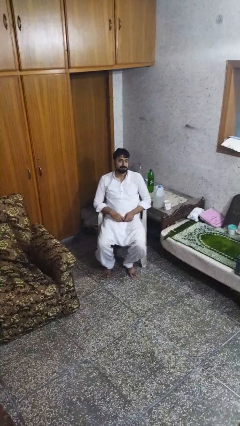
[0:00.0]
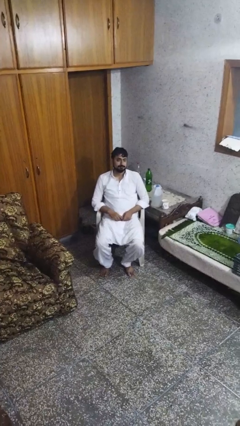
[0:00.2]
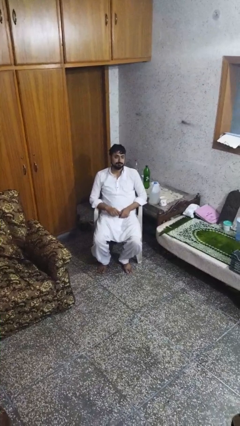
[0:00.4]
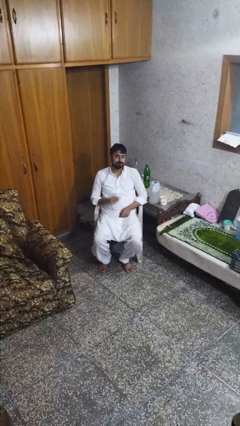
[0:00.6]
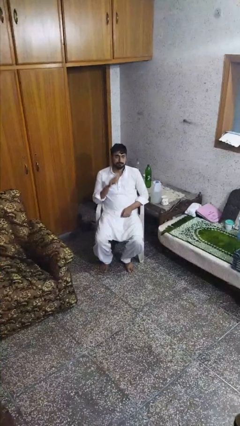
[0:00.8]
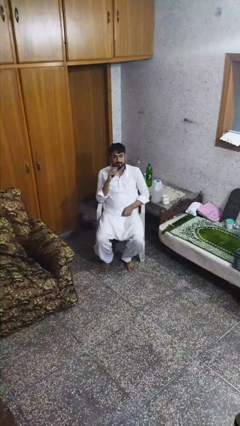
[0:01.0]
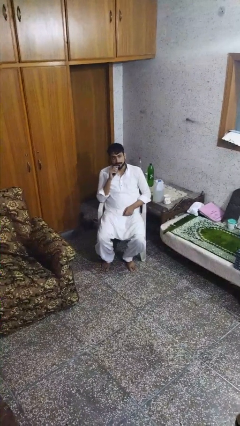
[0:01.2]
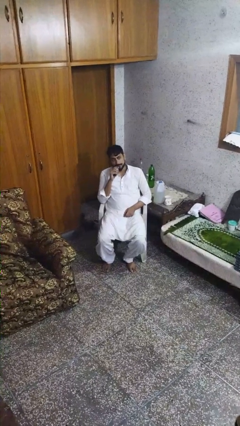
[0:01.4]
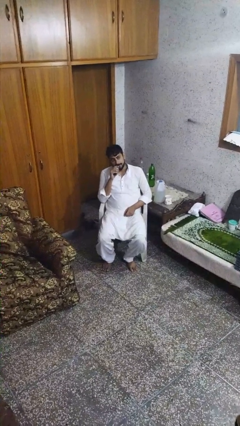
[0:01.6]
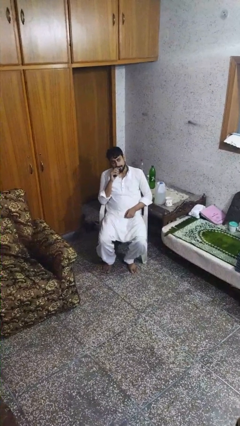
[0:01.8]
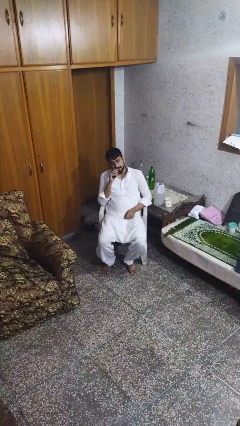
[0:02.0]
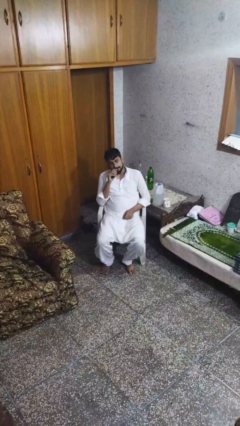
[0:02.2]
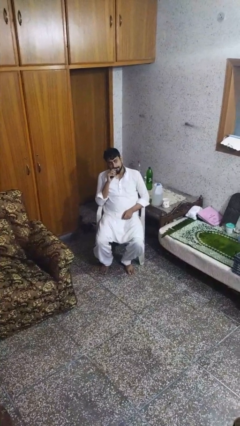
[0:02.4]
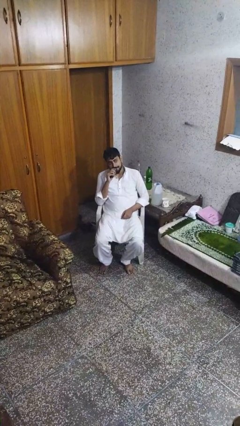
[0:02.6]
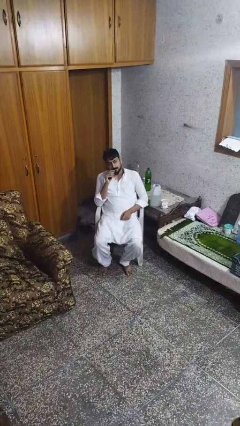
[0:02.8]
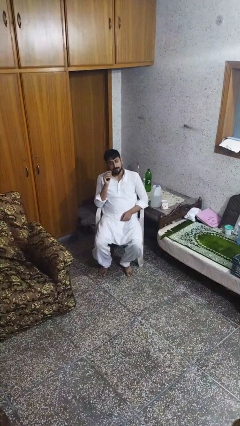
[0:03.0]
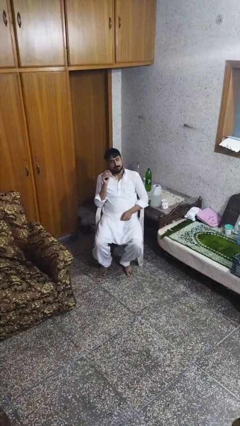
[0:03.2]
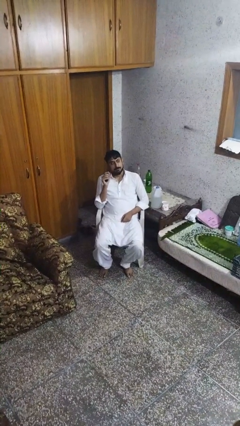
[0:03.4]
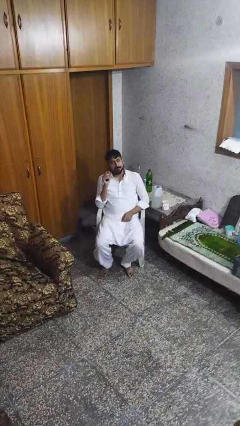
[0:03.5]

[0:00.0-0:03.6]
person vapes

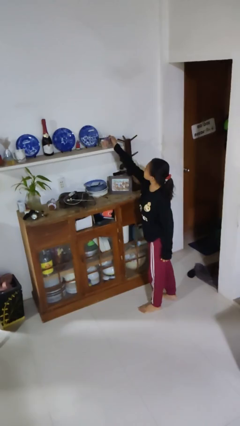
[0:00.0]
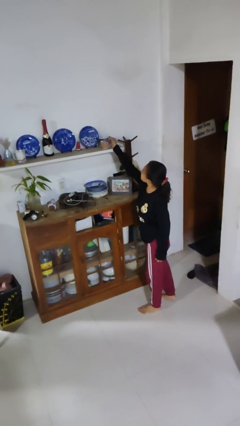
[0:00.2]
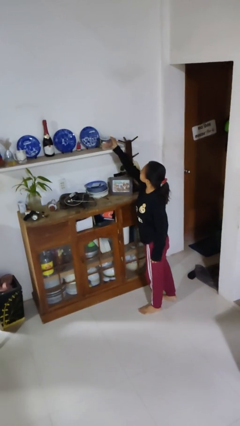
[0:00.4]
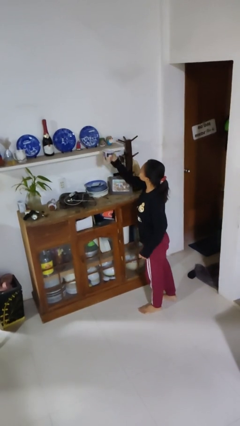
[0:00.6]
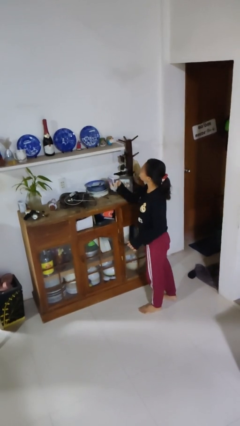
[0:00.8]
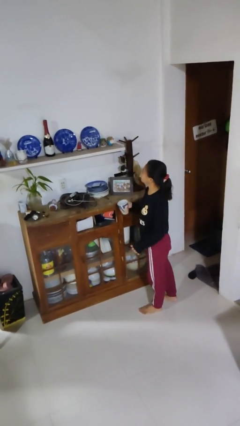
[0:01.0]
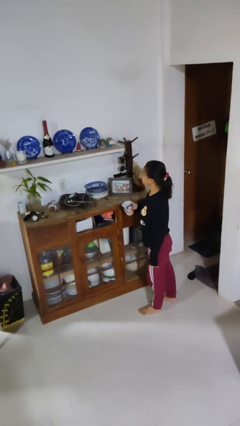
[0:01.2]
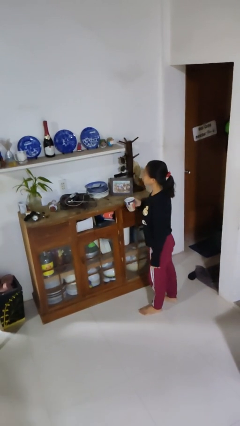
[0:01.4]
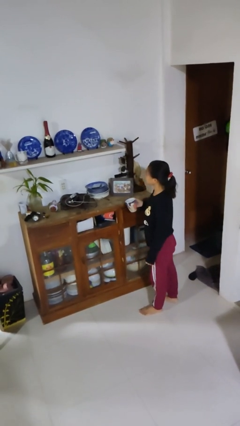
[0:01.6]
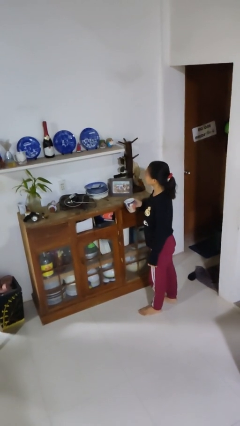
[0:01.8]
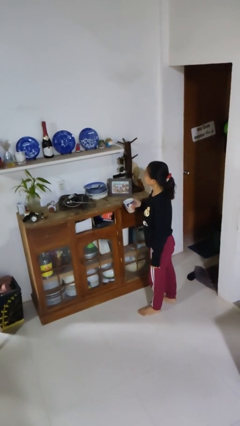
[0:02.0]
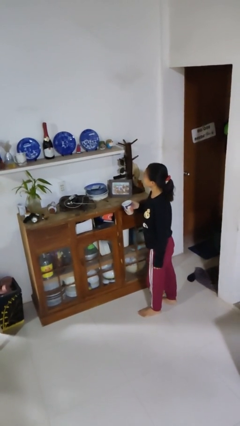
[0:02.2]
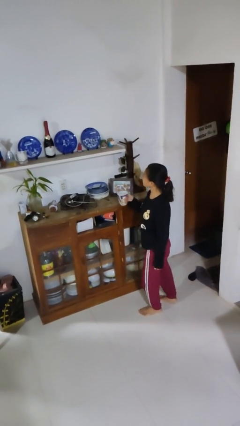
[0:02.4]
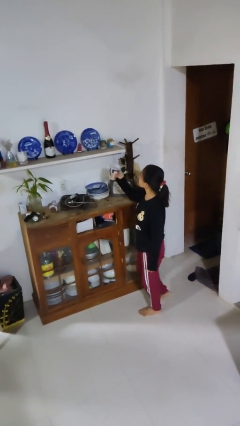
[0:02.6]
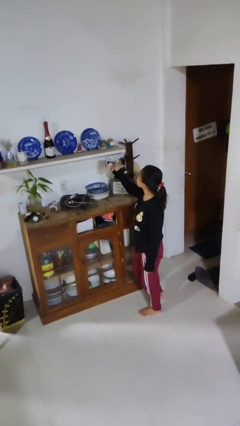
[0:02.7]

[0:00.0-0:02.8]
person picks up object from shelf

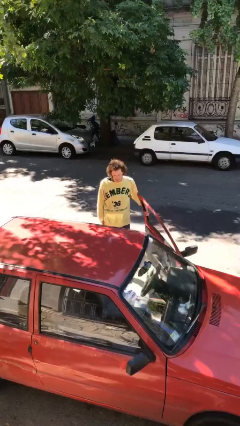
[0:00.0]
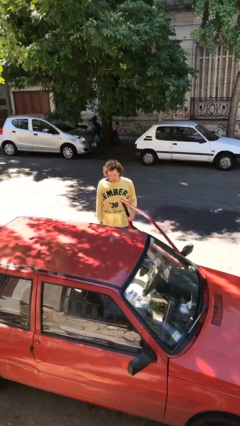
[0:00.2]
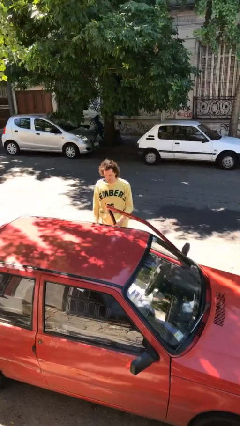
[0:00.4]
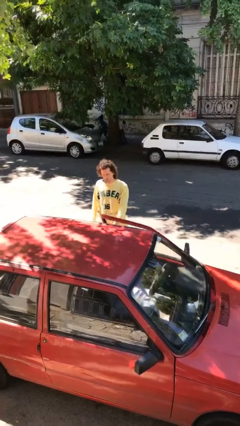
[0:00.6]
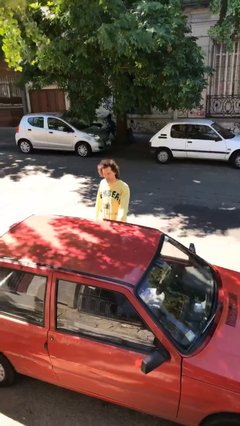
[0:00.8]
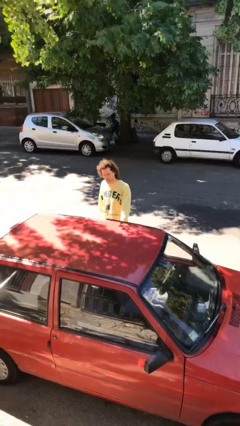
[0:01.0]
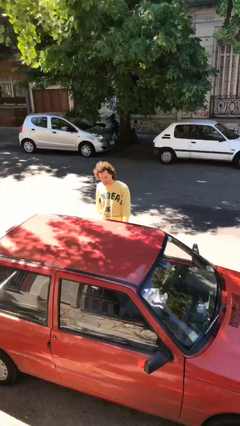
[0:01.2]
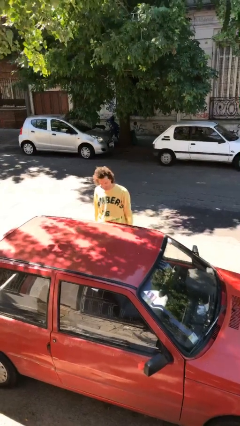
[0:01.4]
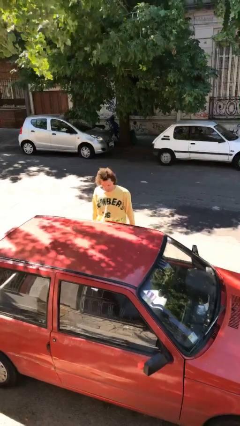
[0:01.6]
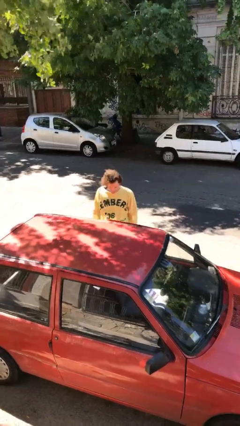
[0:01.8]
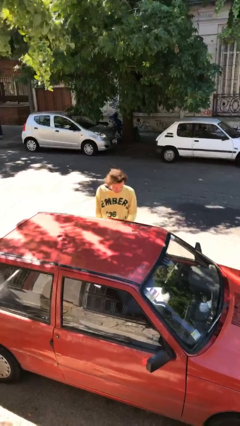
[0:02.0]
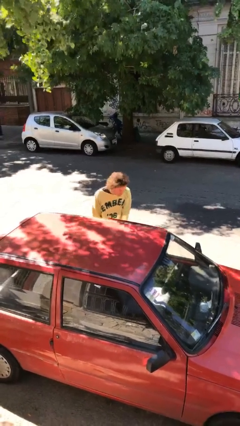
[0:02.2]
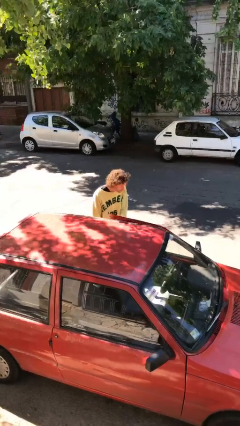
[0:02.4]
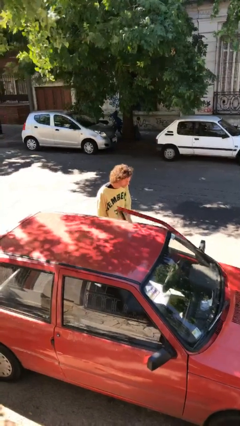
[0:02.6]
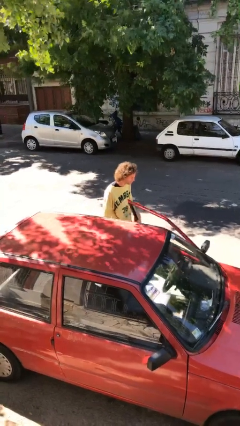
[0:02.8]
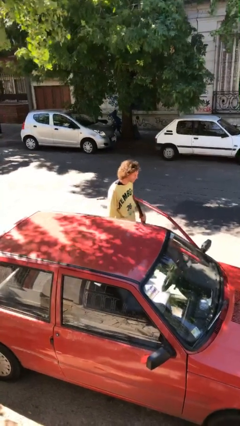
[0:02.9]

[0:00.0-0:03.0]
person closes car door

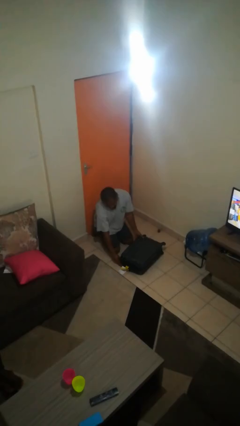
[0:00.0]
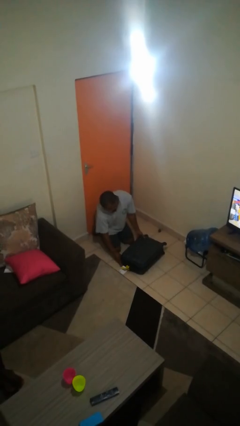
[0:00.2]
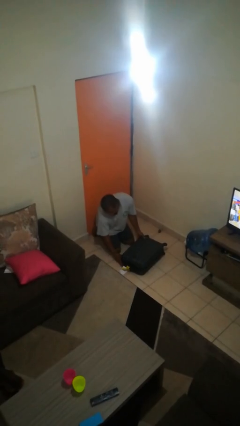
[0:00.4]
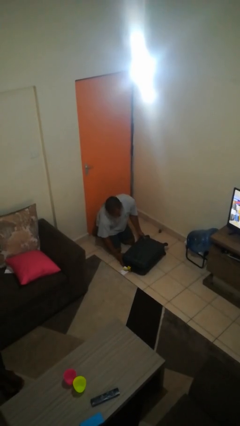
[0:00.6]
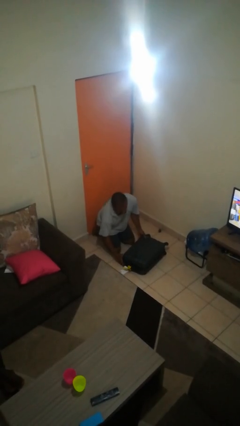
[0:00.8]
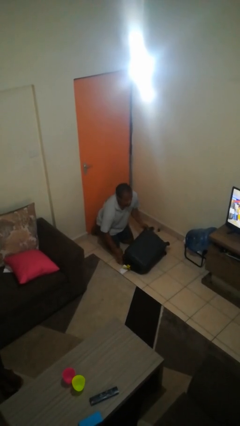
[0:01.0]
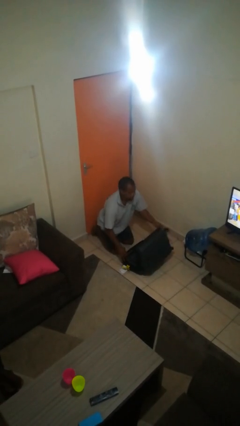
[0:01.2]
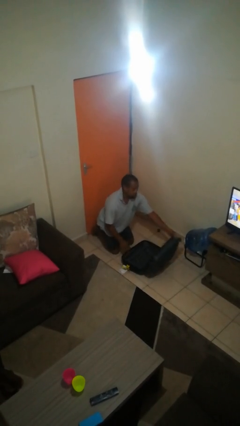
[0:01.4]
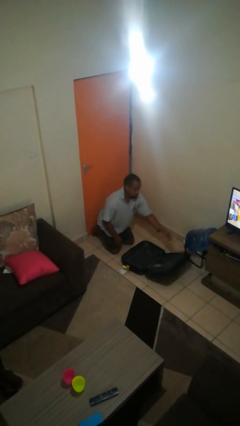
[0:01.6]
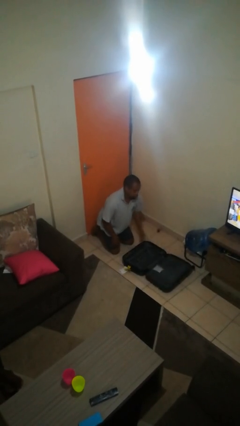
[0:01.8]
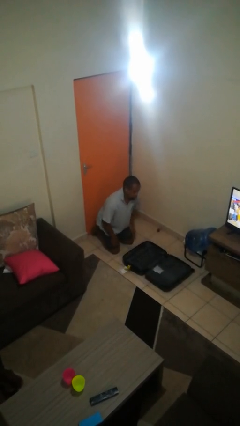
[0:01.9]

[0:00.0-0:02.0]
person opens suitcase

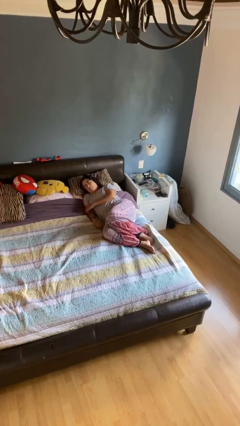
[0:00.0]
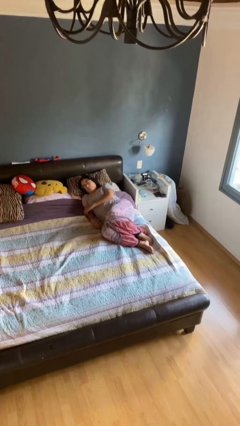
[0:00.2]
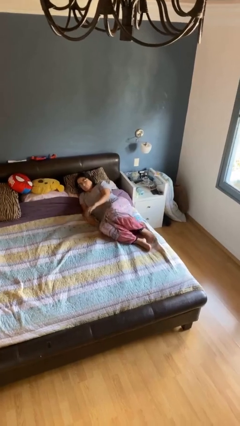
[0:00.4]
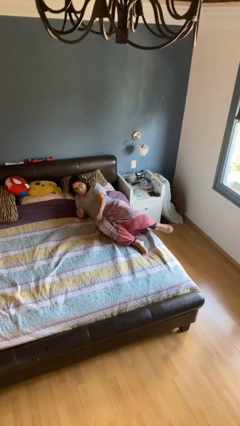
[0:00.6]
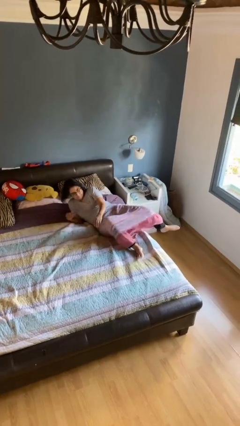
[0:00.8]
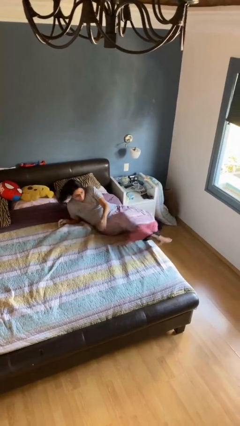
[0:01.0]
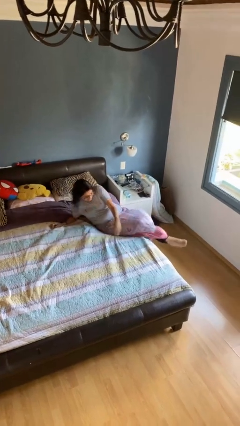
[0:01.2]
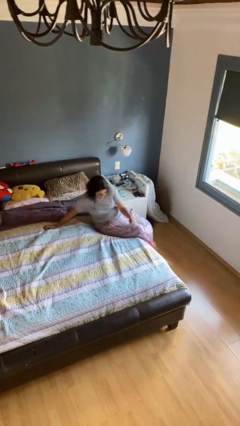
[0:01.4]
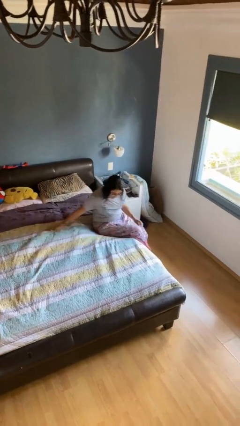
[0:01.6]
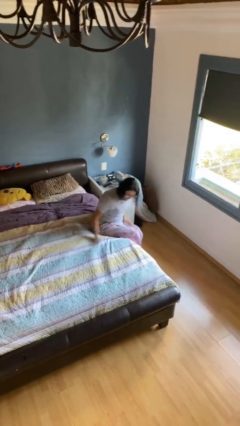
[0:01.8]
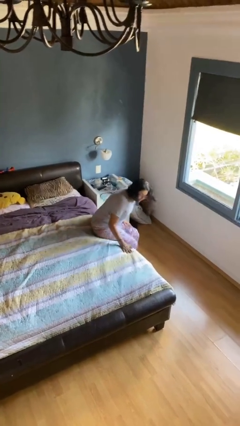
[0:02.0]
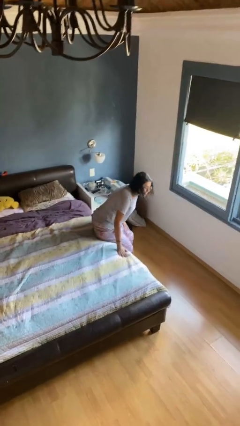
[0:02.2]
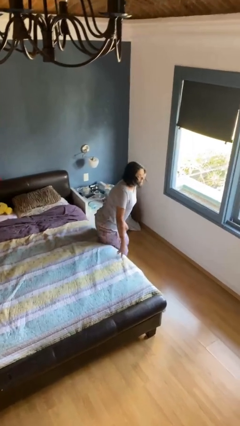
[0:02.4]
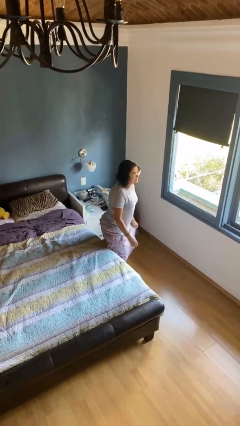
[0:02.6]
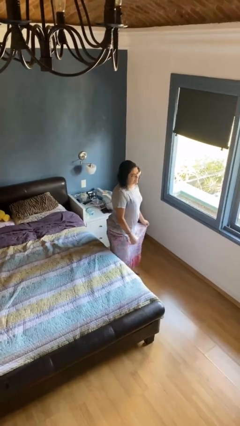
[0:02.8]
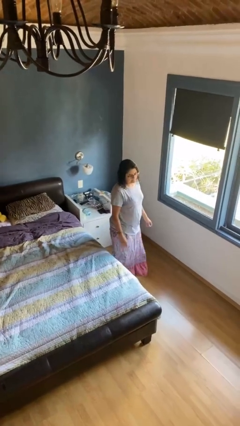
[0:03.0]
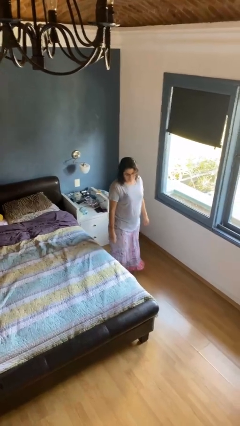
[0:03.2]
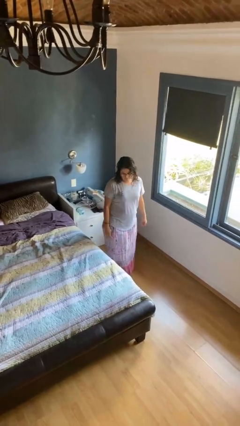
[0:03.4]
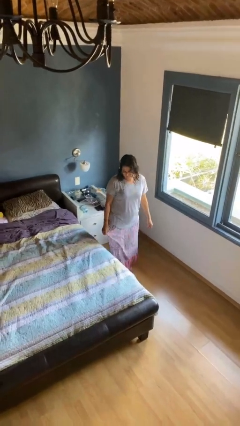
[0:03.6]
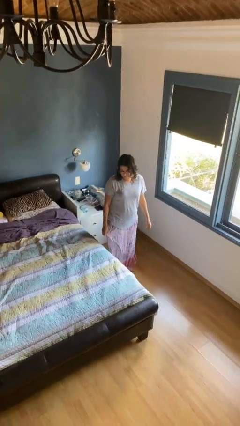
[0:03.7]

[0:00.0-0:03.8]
person stands up

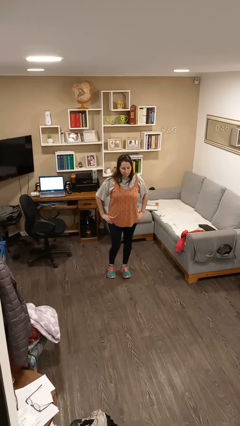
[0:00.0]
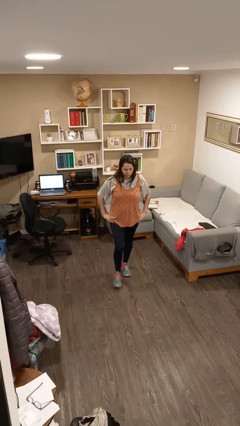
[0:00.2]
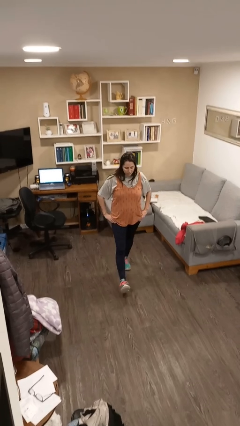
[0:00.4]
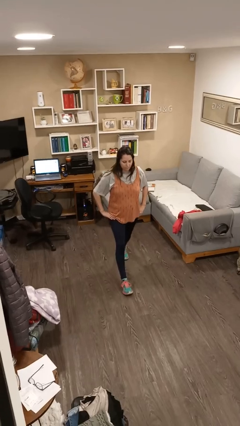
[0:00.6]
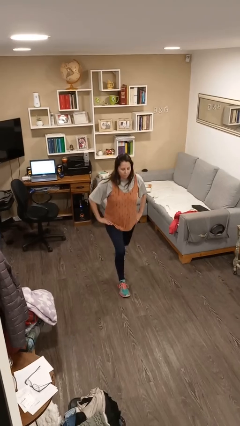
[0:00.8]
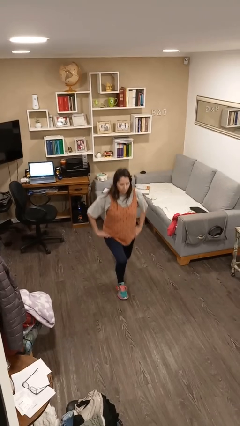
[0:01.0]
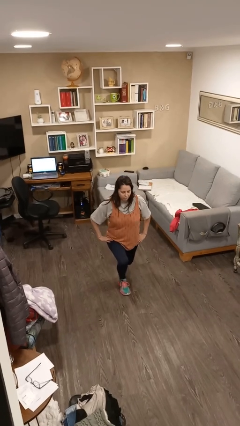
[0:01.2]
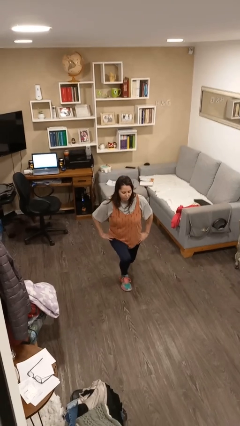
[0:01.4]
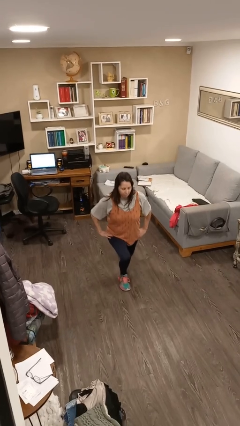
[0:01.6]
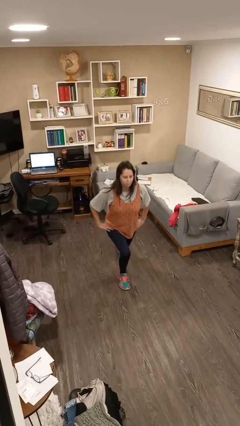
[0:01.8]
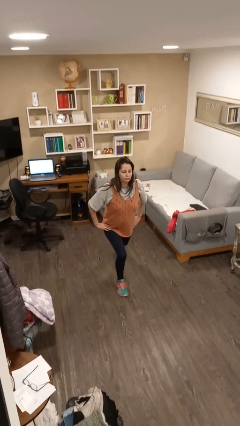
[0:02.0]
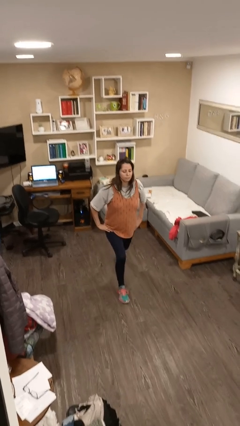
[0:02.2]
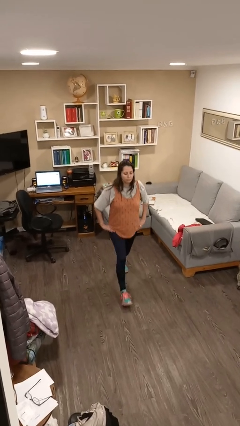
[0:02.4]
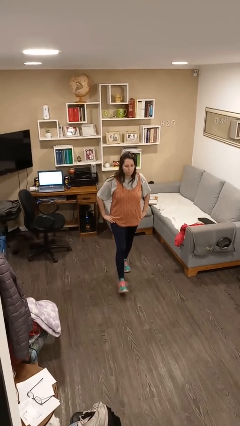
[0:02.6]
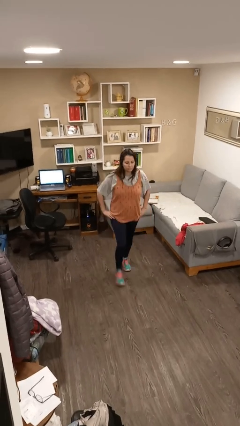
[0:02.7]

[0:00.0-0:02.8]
person exercises with lunges
